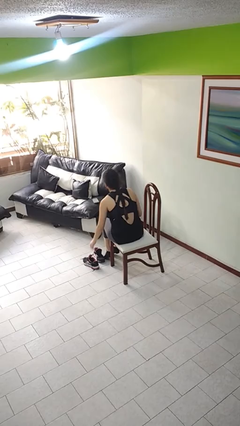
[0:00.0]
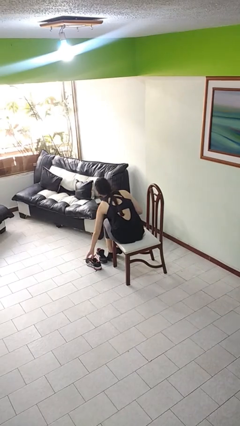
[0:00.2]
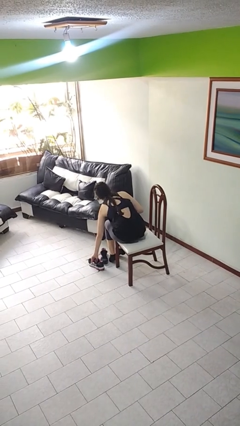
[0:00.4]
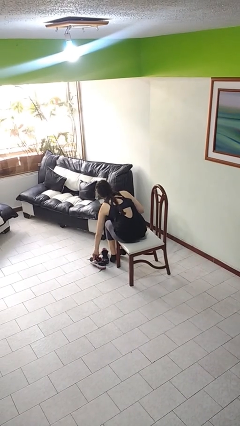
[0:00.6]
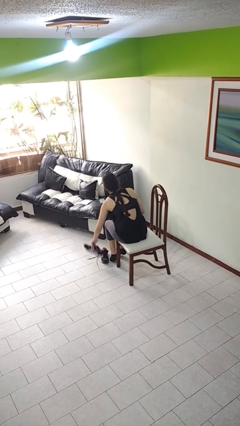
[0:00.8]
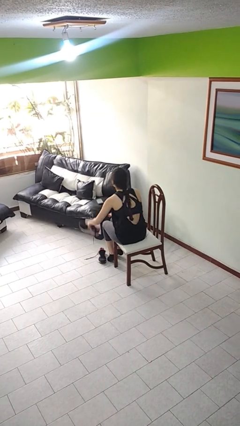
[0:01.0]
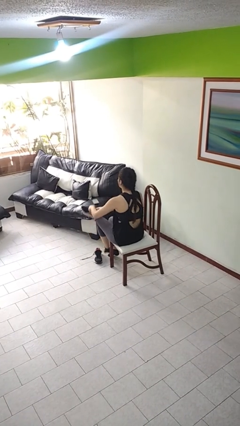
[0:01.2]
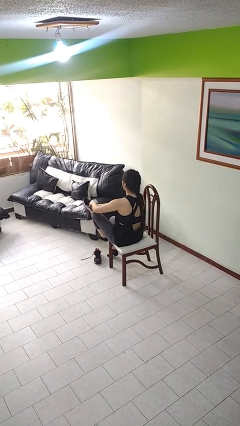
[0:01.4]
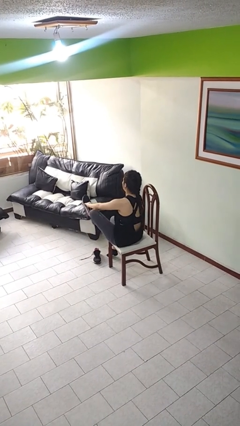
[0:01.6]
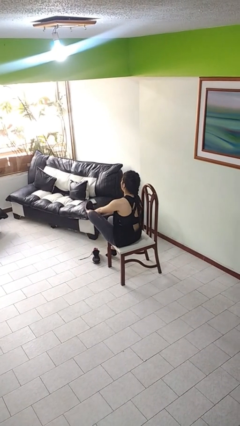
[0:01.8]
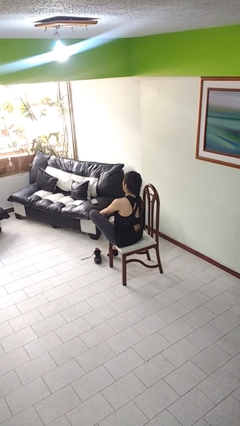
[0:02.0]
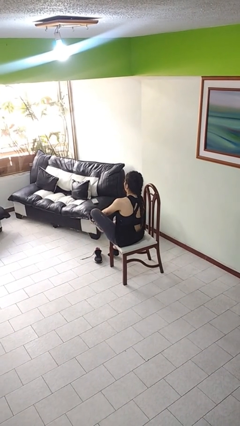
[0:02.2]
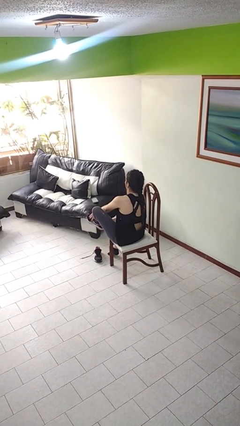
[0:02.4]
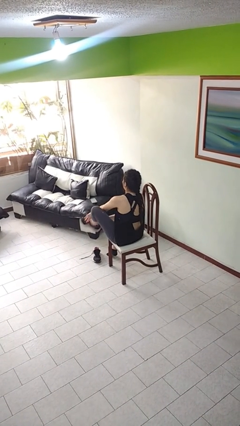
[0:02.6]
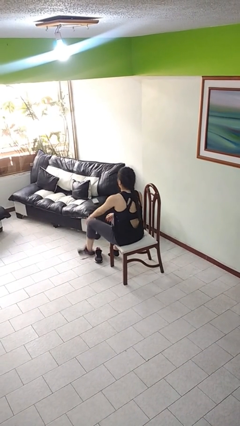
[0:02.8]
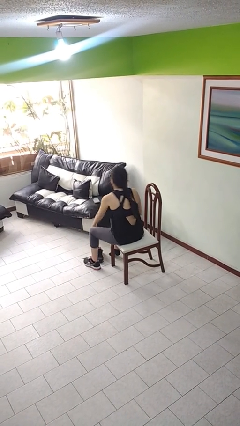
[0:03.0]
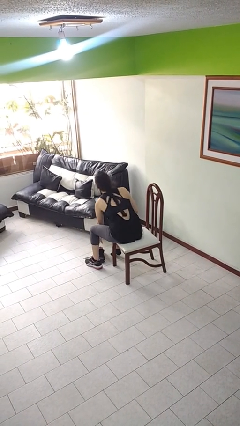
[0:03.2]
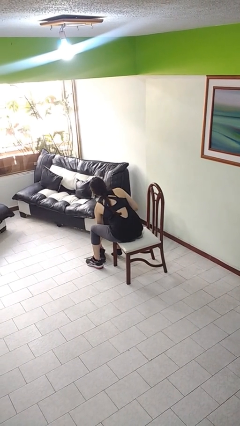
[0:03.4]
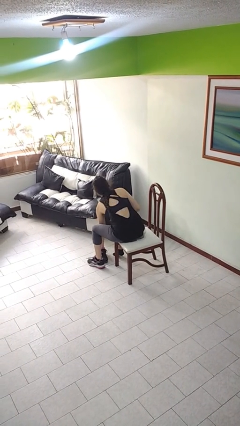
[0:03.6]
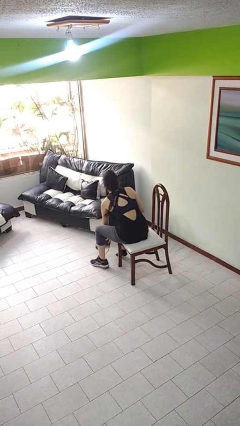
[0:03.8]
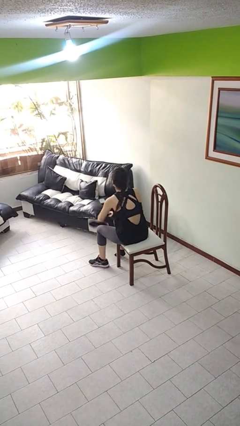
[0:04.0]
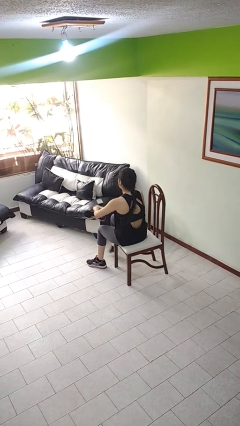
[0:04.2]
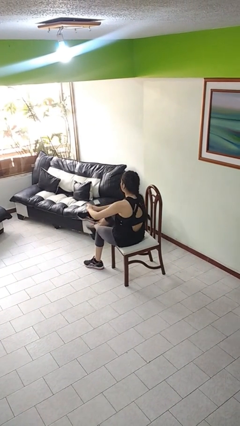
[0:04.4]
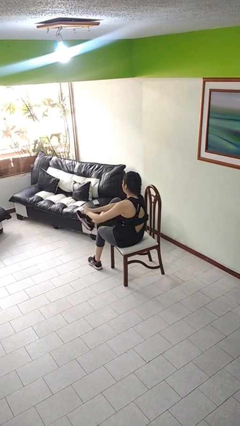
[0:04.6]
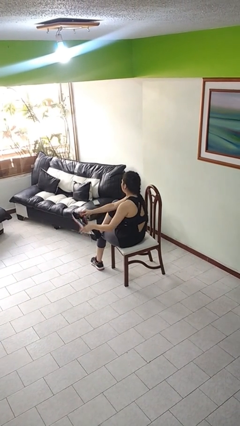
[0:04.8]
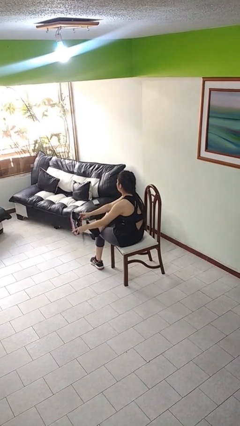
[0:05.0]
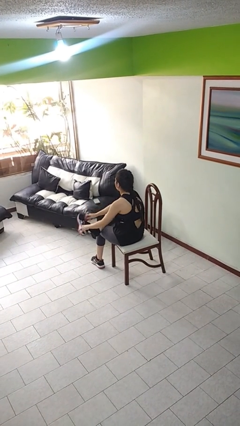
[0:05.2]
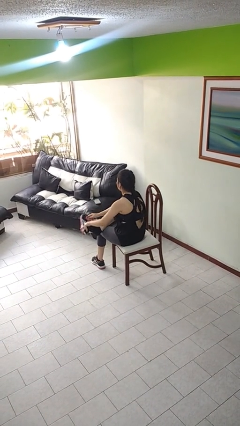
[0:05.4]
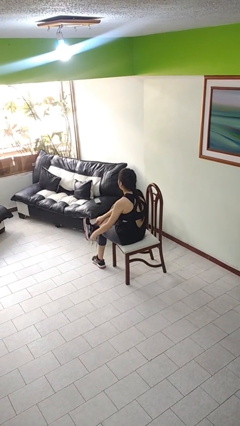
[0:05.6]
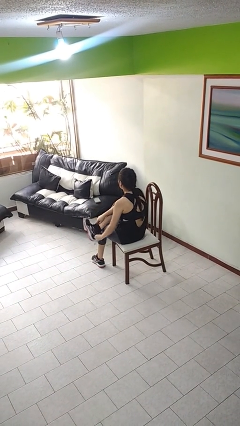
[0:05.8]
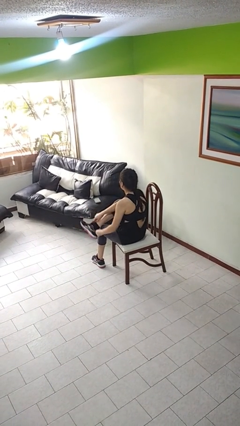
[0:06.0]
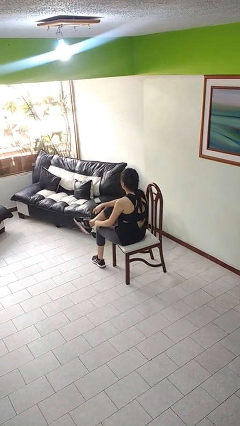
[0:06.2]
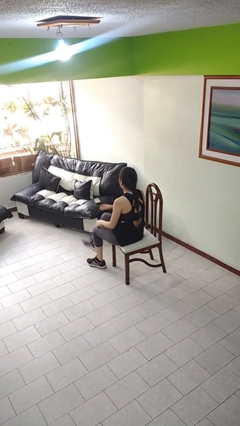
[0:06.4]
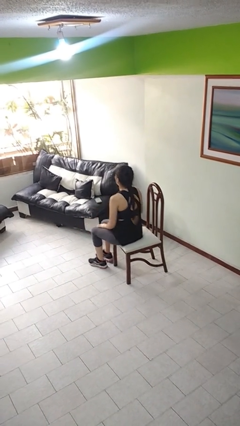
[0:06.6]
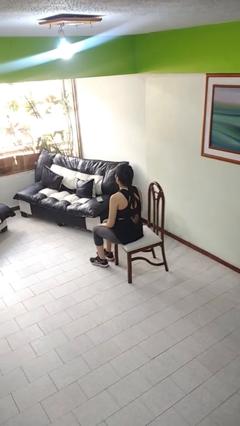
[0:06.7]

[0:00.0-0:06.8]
person puts on shoes

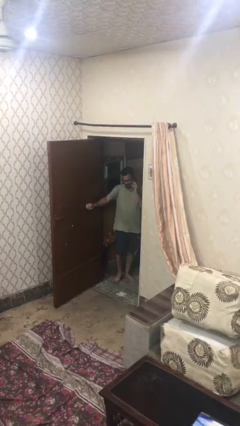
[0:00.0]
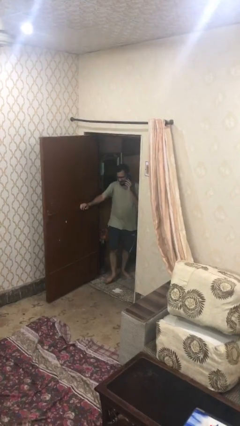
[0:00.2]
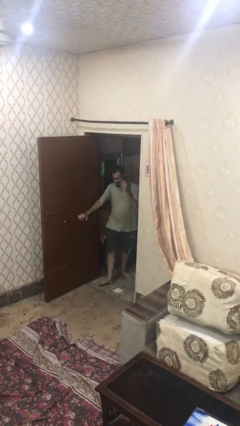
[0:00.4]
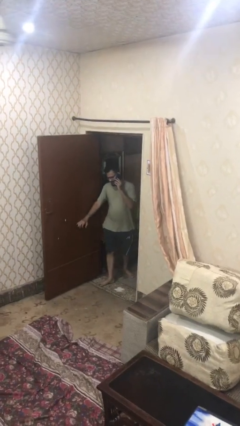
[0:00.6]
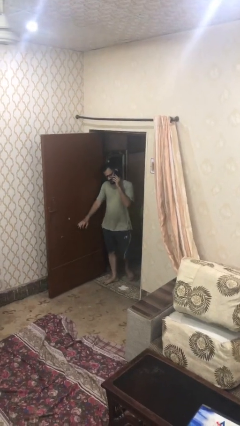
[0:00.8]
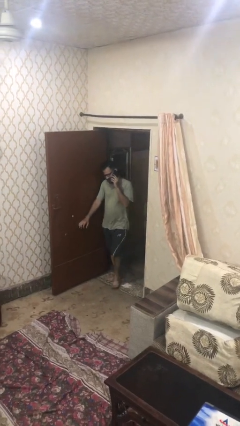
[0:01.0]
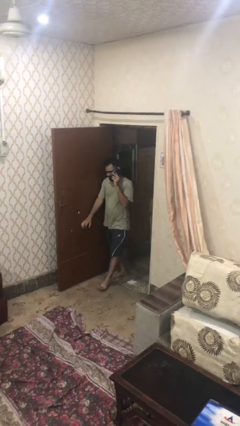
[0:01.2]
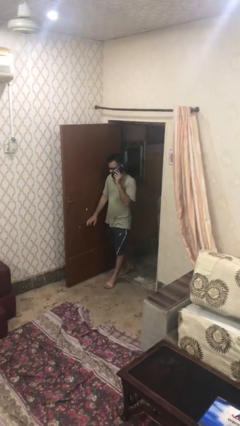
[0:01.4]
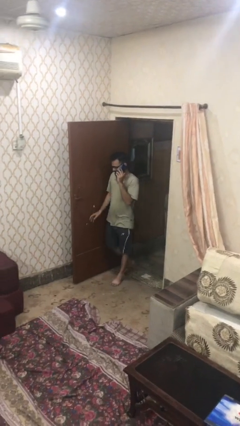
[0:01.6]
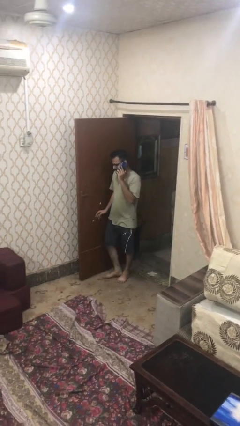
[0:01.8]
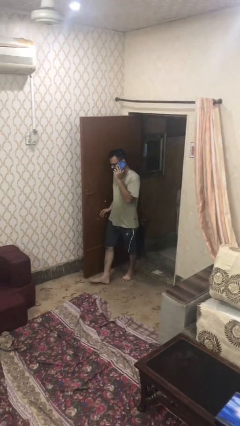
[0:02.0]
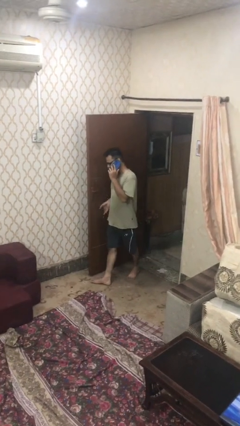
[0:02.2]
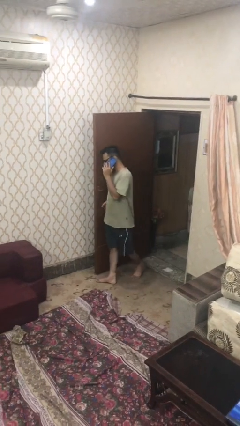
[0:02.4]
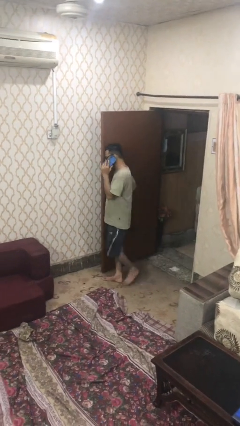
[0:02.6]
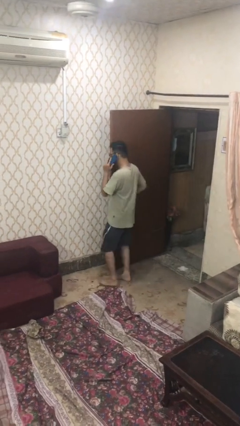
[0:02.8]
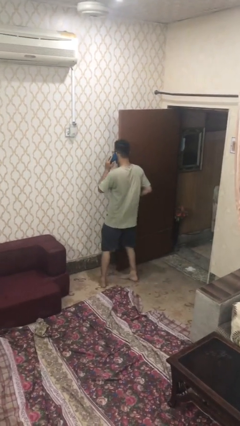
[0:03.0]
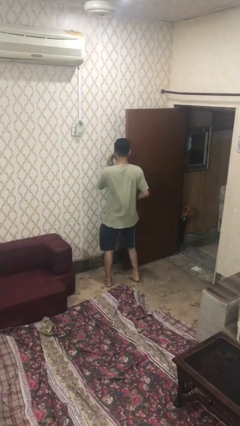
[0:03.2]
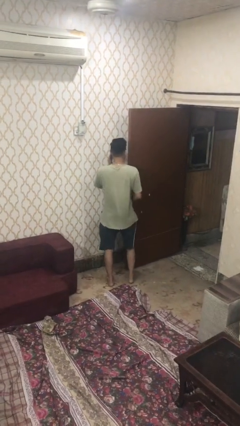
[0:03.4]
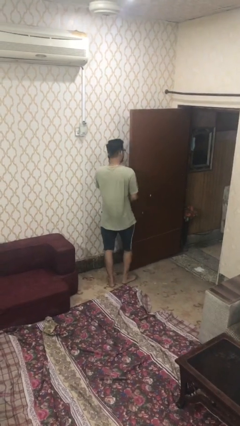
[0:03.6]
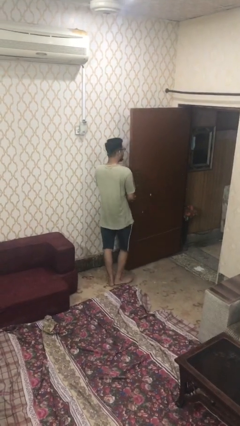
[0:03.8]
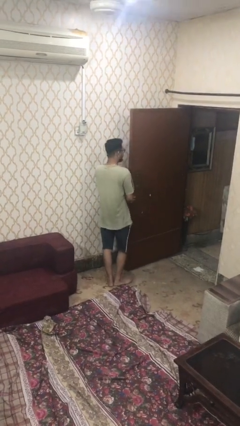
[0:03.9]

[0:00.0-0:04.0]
person enters scene through structure

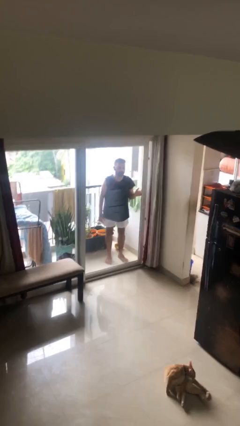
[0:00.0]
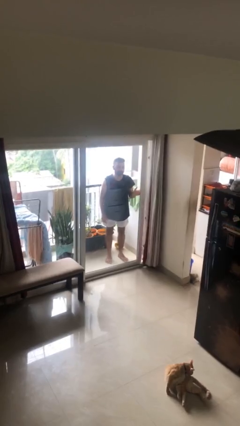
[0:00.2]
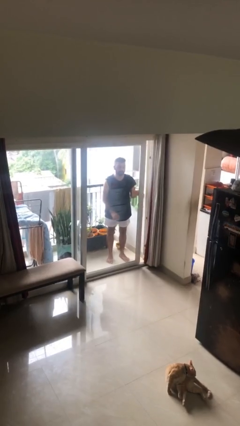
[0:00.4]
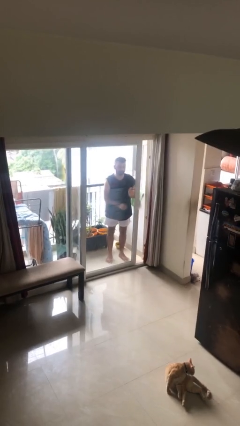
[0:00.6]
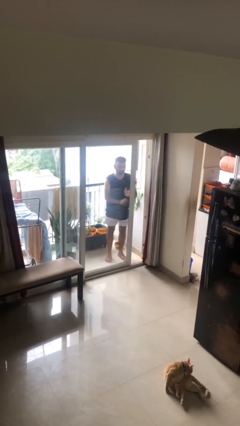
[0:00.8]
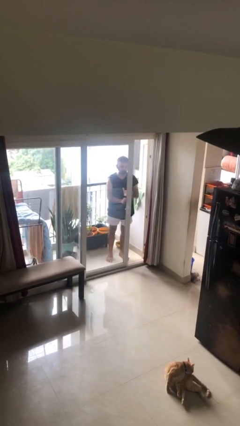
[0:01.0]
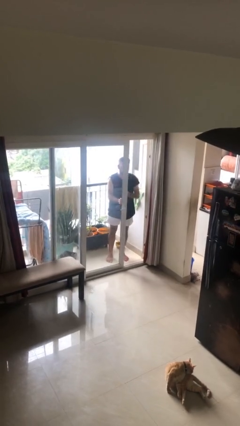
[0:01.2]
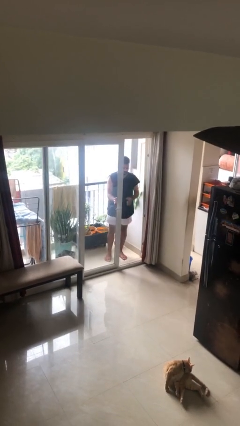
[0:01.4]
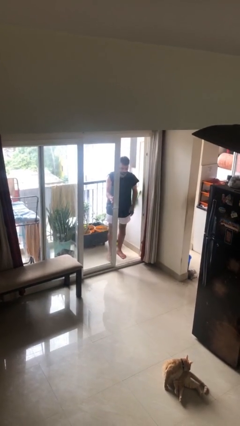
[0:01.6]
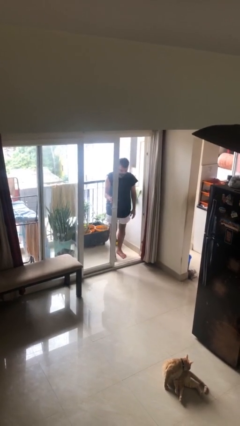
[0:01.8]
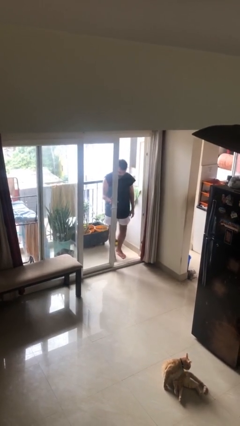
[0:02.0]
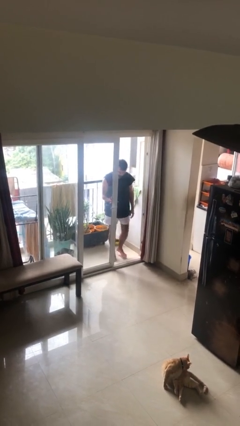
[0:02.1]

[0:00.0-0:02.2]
person opens facility door

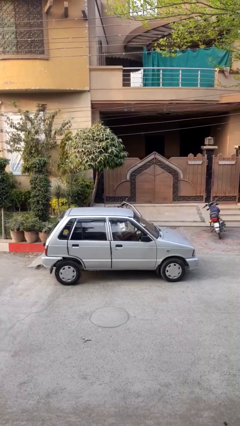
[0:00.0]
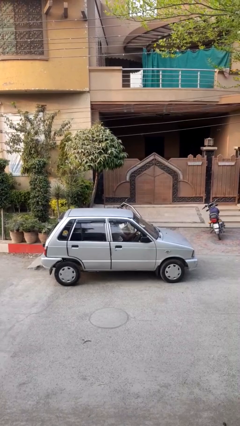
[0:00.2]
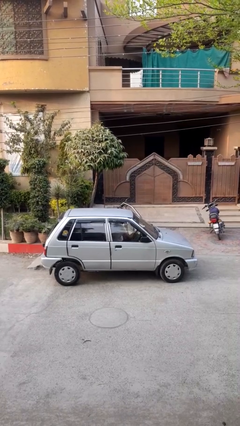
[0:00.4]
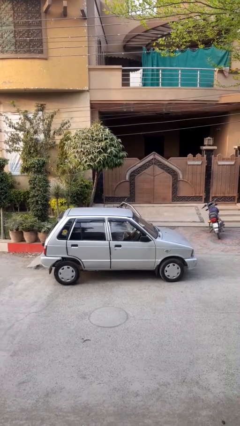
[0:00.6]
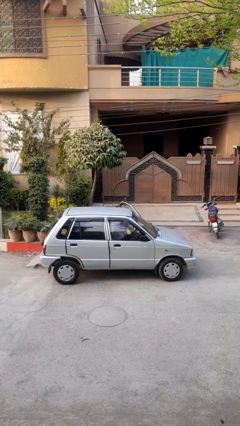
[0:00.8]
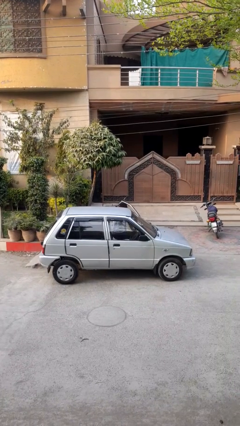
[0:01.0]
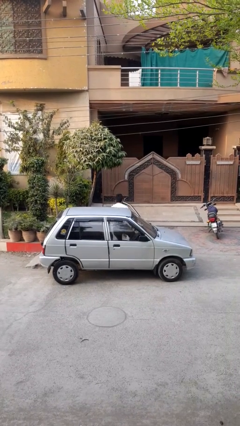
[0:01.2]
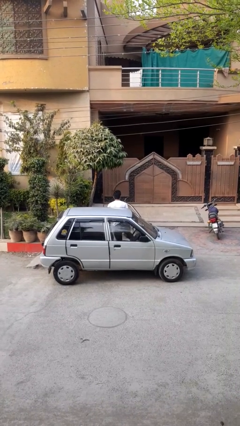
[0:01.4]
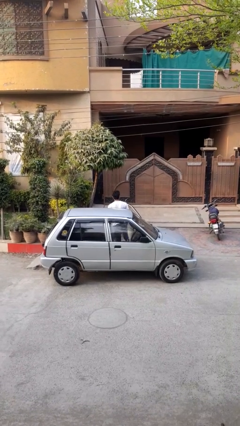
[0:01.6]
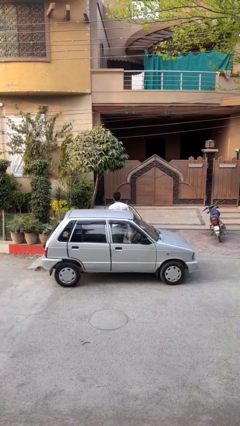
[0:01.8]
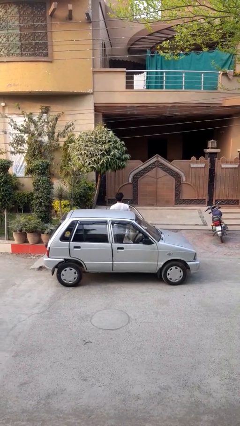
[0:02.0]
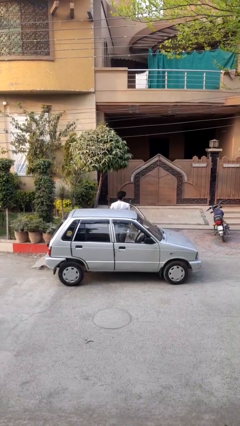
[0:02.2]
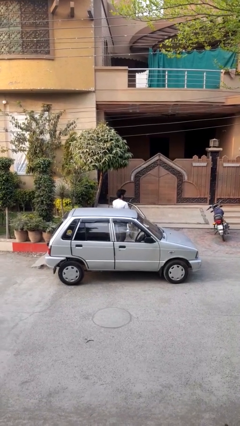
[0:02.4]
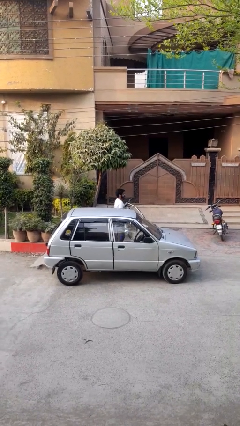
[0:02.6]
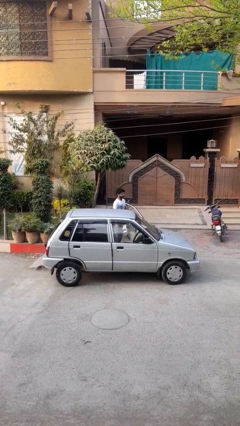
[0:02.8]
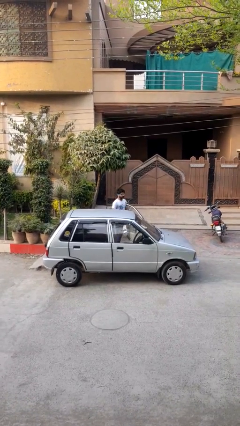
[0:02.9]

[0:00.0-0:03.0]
person exits car

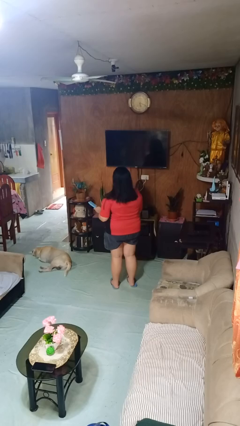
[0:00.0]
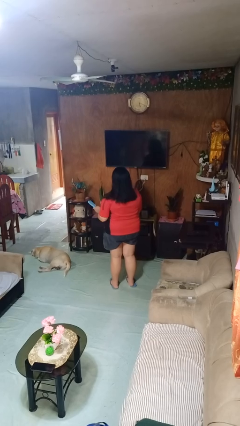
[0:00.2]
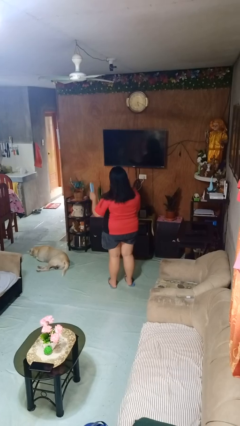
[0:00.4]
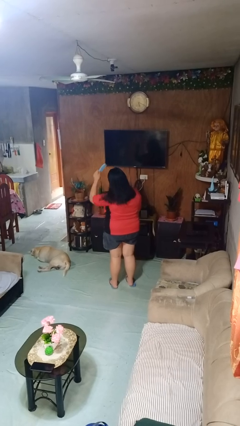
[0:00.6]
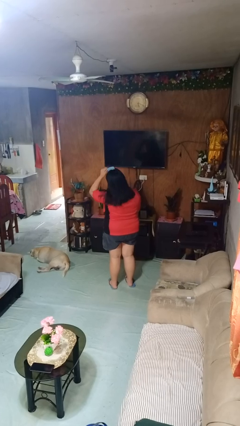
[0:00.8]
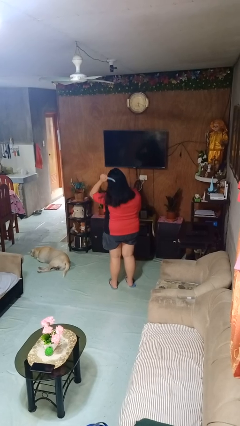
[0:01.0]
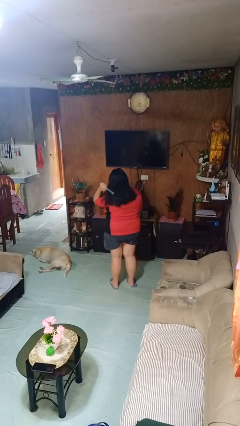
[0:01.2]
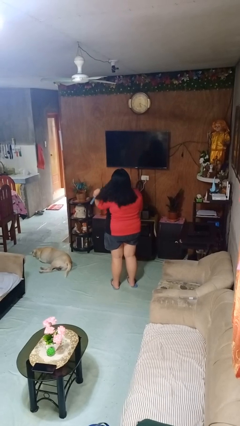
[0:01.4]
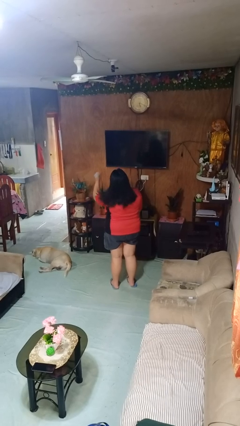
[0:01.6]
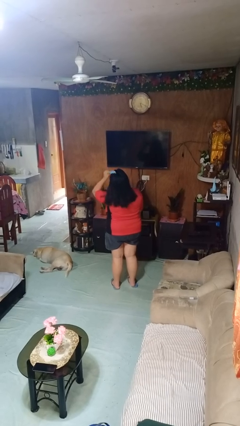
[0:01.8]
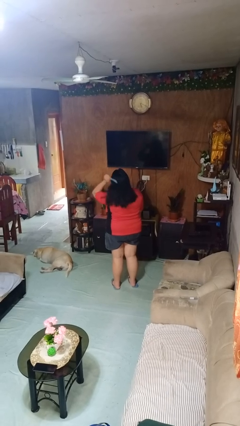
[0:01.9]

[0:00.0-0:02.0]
person brushes hair
